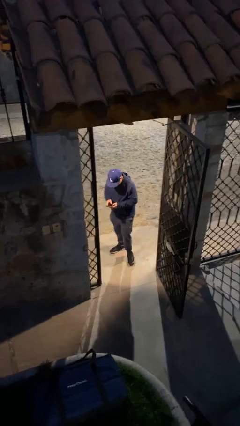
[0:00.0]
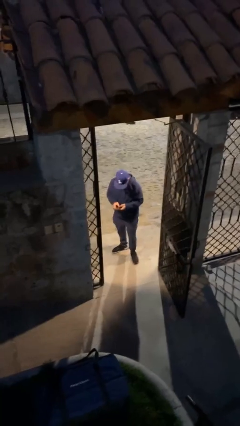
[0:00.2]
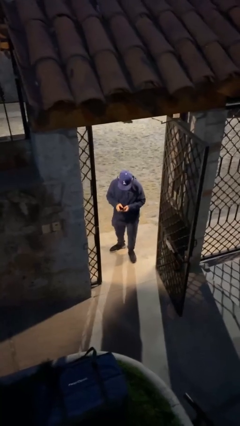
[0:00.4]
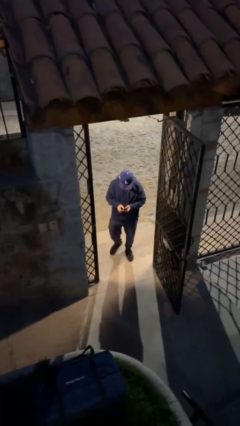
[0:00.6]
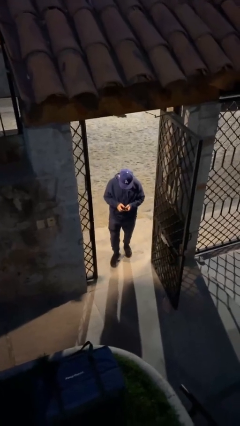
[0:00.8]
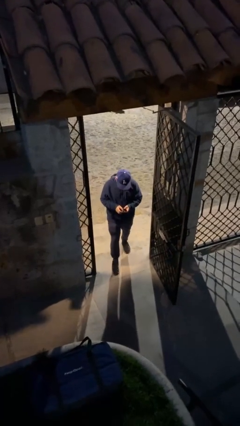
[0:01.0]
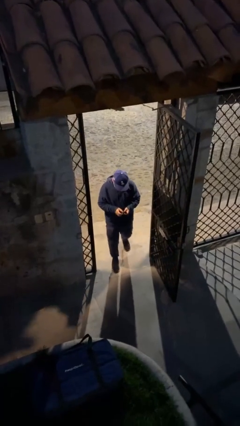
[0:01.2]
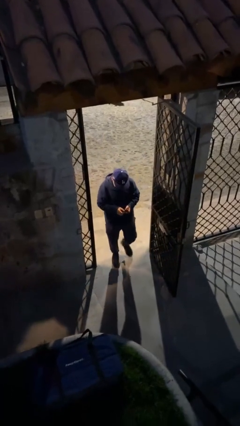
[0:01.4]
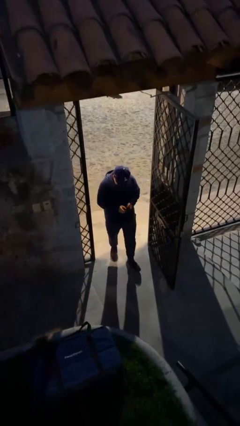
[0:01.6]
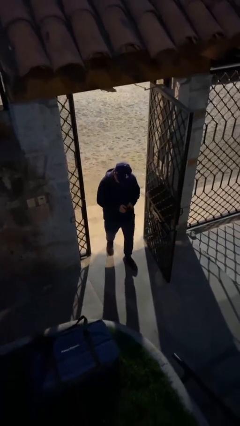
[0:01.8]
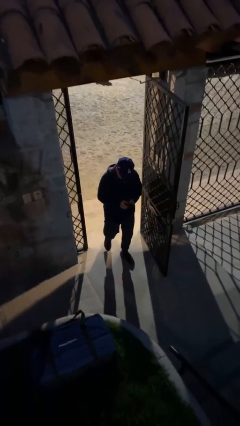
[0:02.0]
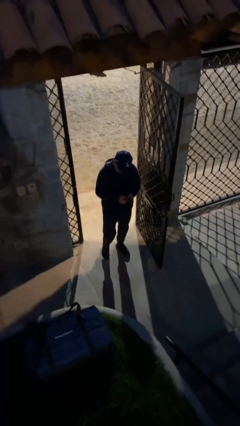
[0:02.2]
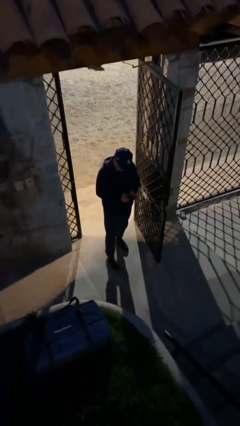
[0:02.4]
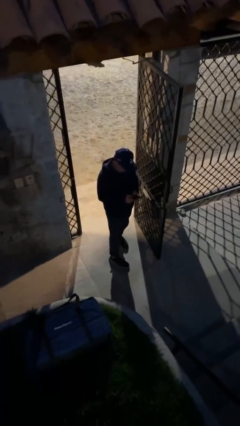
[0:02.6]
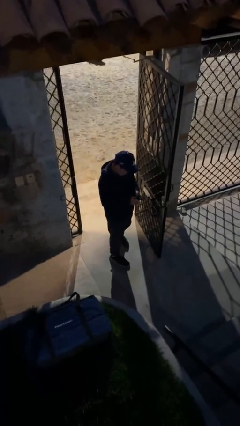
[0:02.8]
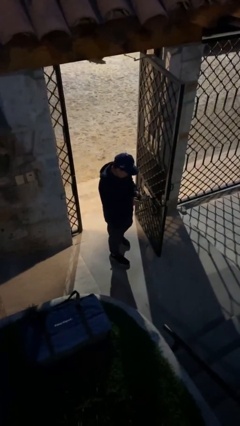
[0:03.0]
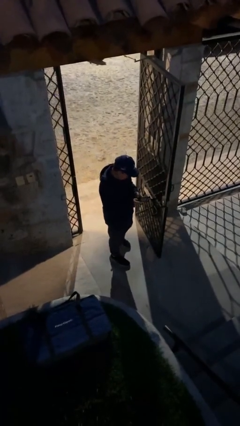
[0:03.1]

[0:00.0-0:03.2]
person enters scene through structure

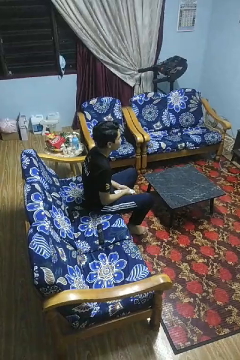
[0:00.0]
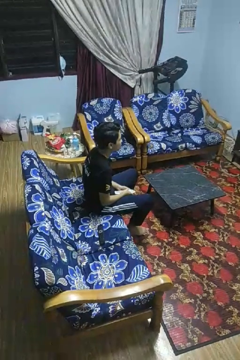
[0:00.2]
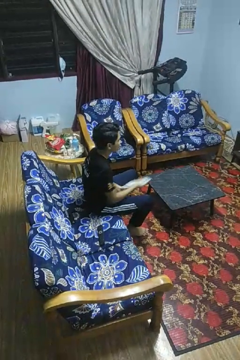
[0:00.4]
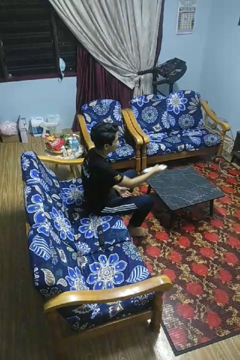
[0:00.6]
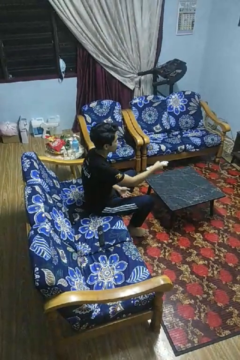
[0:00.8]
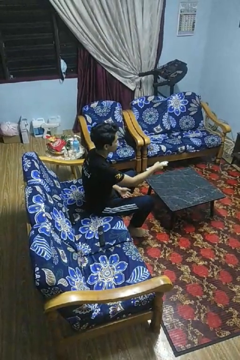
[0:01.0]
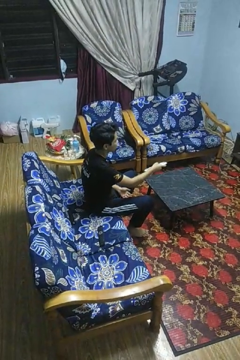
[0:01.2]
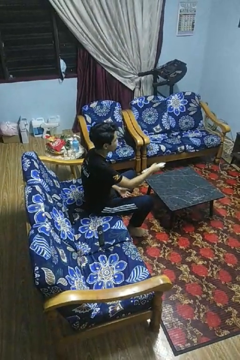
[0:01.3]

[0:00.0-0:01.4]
person uses television remote

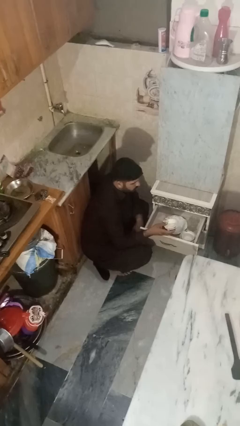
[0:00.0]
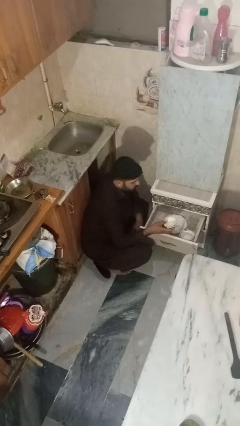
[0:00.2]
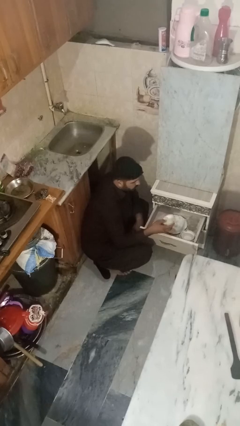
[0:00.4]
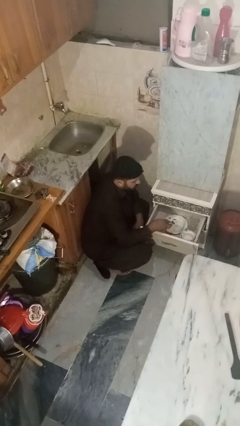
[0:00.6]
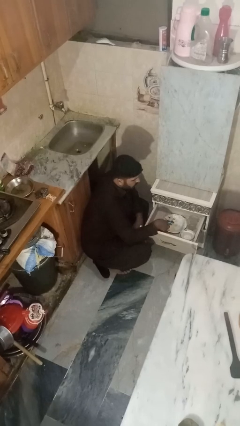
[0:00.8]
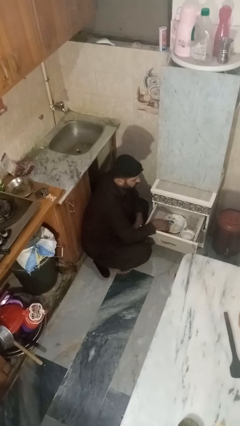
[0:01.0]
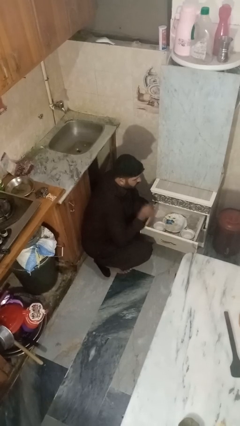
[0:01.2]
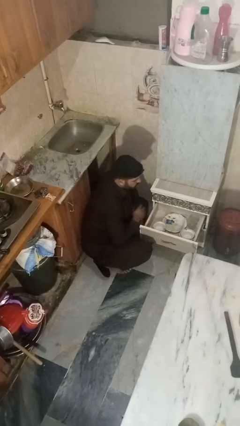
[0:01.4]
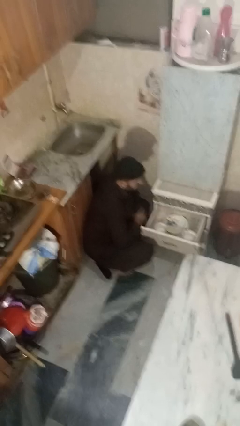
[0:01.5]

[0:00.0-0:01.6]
person puts object into kitchen drawer

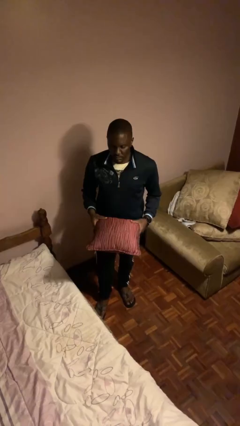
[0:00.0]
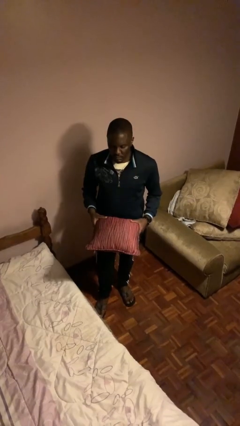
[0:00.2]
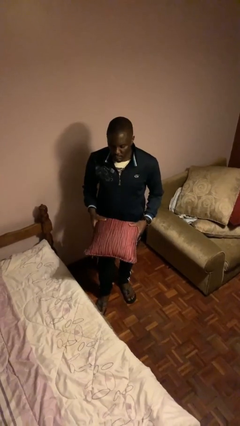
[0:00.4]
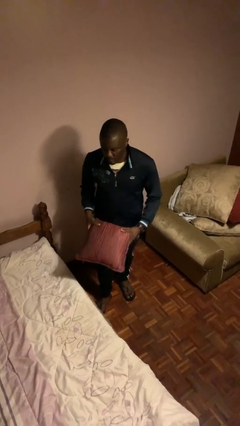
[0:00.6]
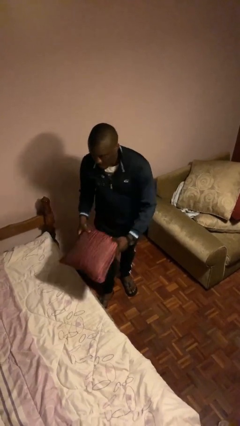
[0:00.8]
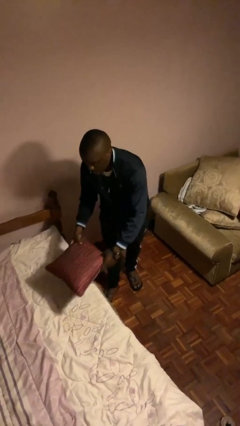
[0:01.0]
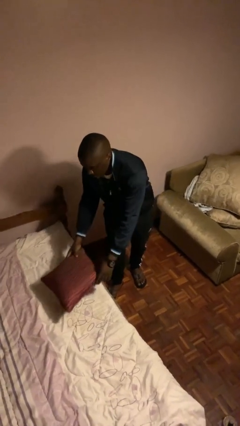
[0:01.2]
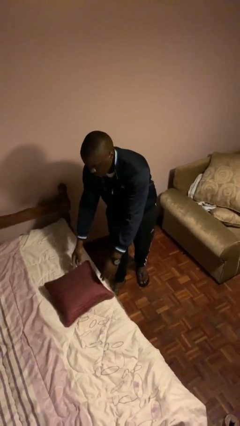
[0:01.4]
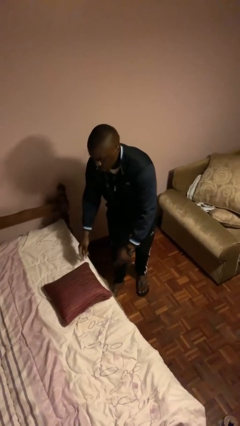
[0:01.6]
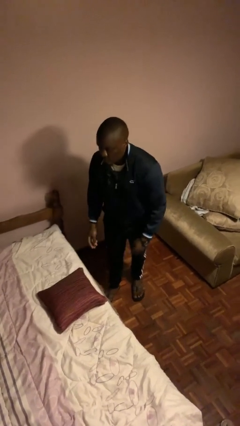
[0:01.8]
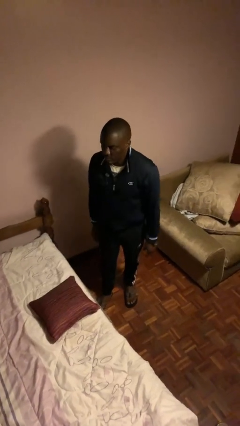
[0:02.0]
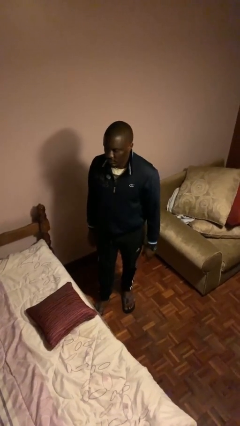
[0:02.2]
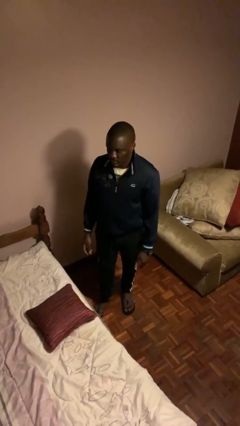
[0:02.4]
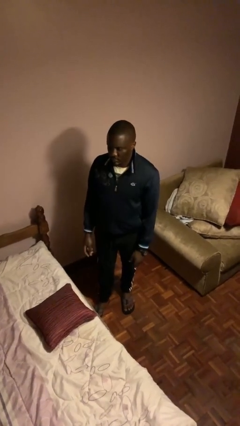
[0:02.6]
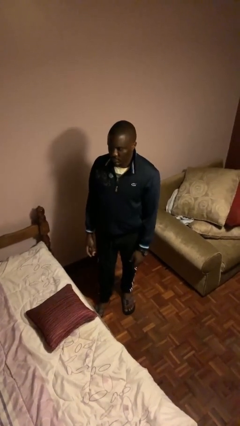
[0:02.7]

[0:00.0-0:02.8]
person puts down object on bed

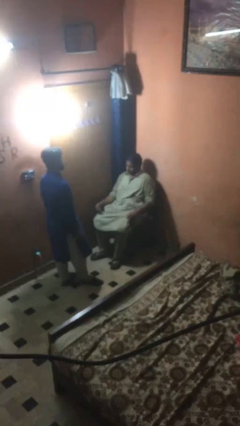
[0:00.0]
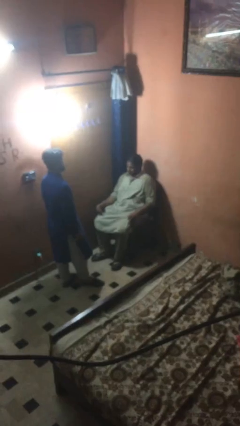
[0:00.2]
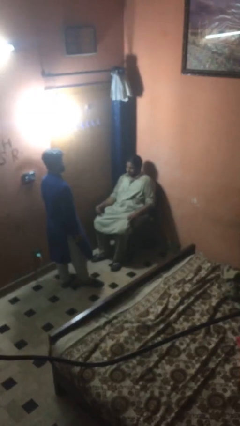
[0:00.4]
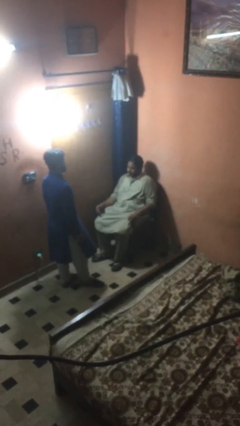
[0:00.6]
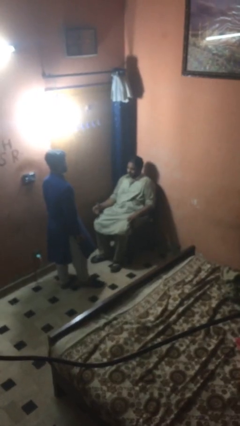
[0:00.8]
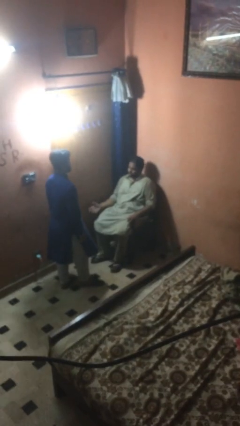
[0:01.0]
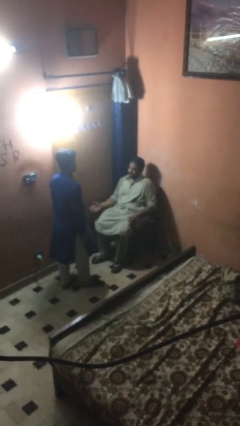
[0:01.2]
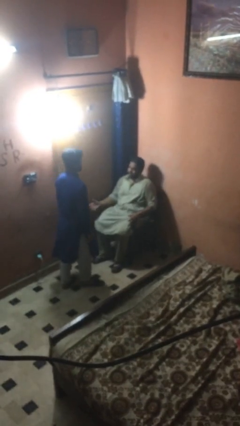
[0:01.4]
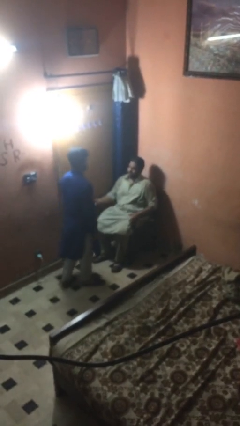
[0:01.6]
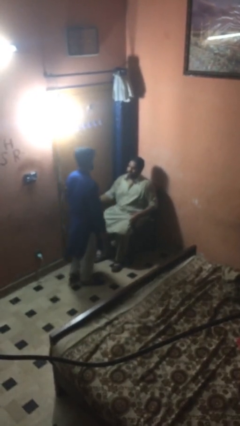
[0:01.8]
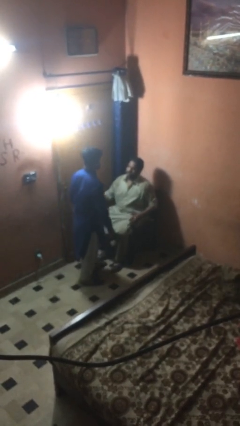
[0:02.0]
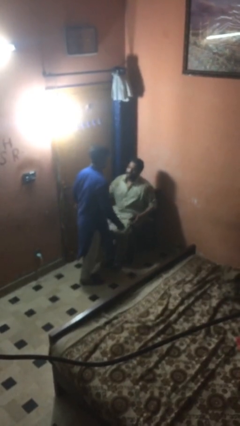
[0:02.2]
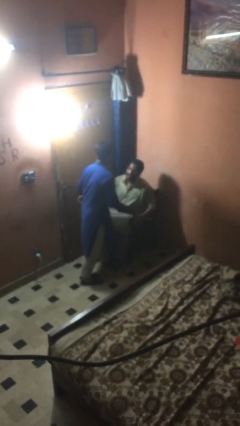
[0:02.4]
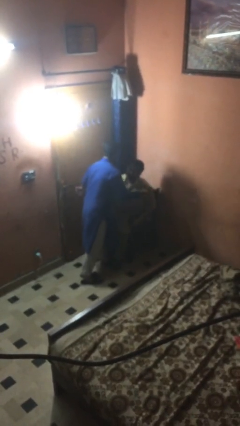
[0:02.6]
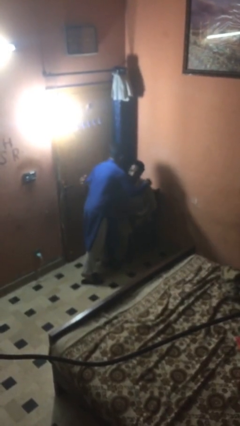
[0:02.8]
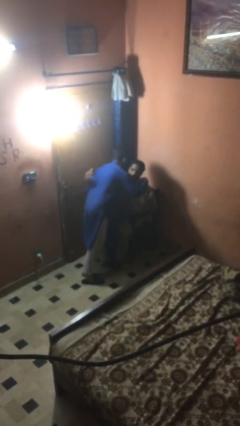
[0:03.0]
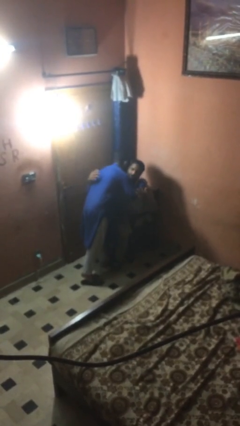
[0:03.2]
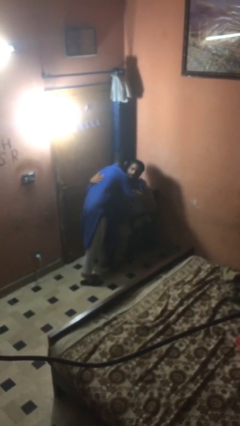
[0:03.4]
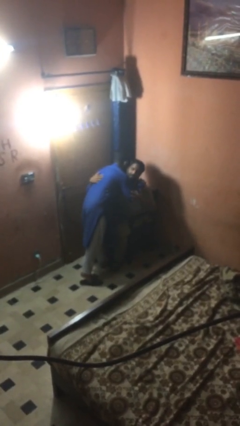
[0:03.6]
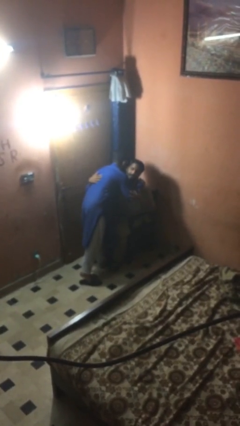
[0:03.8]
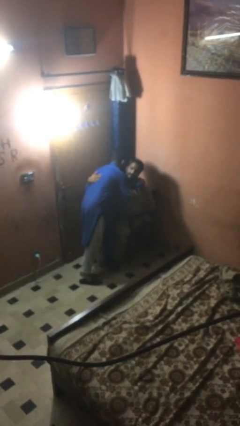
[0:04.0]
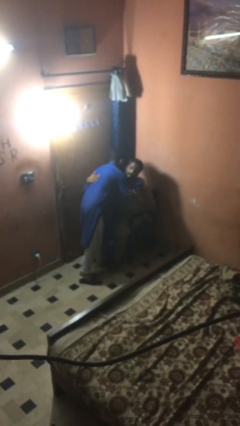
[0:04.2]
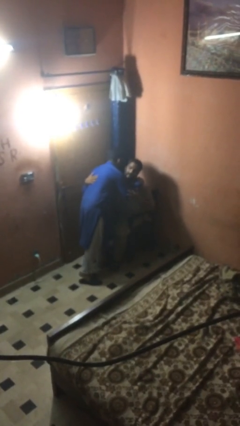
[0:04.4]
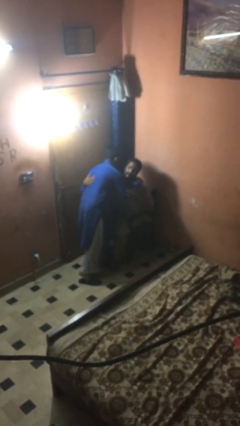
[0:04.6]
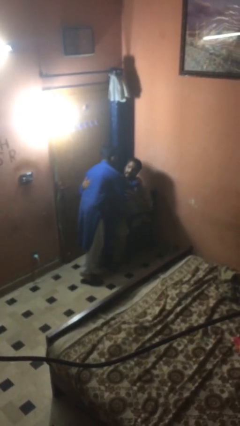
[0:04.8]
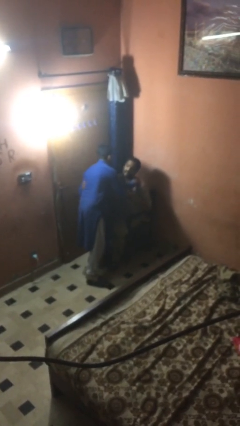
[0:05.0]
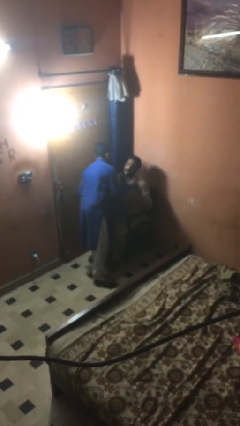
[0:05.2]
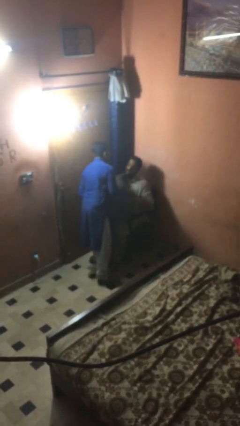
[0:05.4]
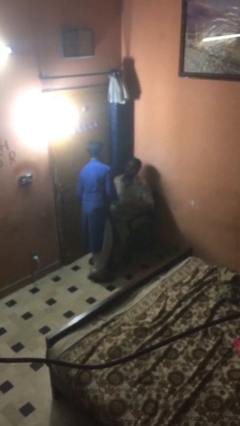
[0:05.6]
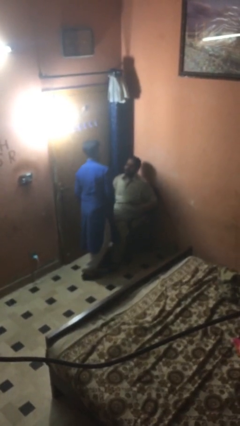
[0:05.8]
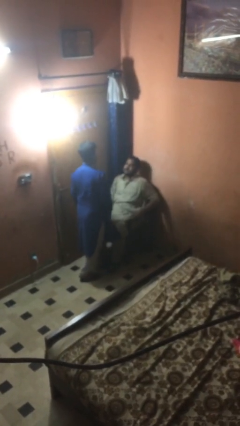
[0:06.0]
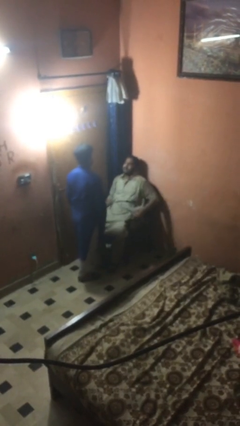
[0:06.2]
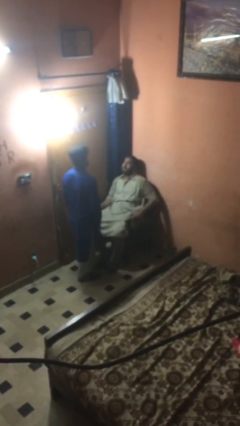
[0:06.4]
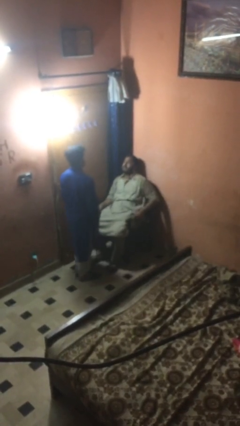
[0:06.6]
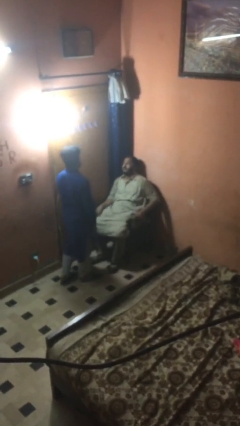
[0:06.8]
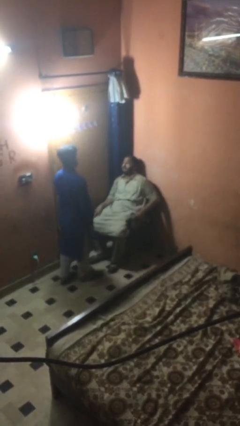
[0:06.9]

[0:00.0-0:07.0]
person embraces person

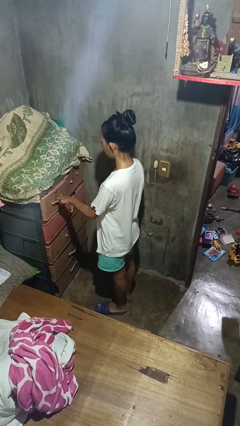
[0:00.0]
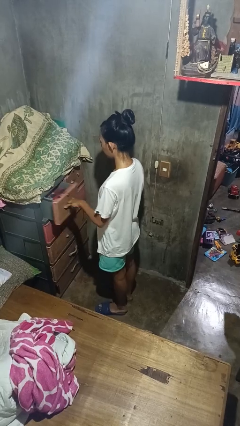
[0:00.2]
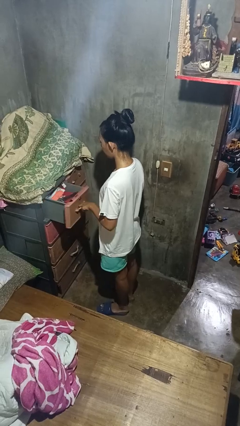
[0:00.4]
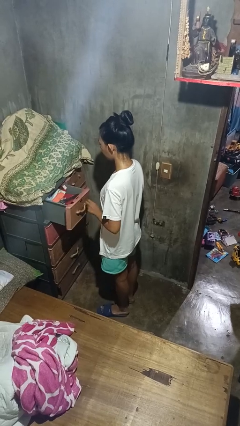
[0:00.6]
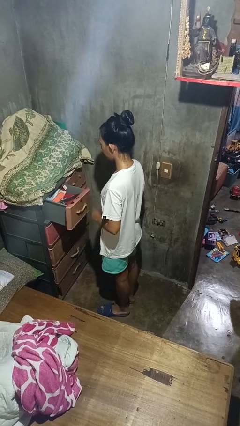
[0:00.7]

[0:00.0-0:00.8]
person opens dresser drawer

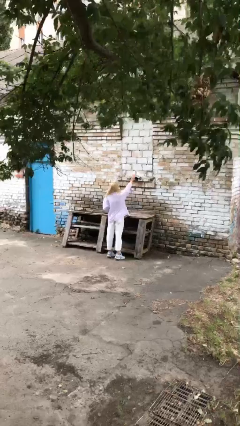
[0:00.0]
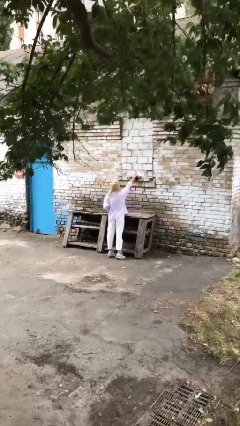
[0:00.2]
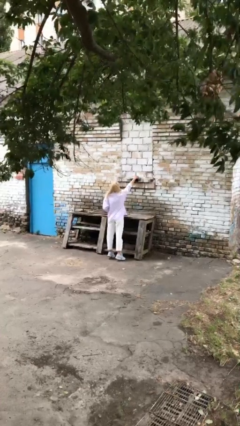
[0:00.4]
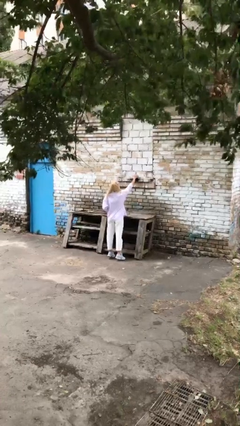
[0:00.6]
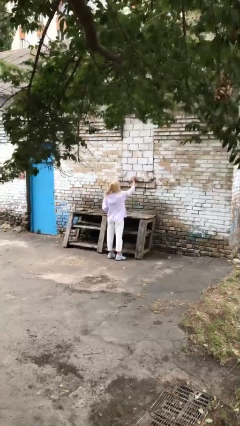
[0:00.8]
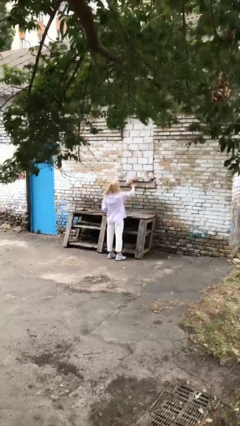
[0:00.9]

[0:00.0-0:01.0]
person picks up object from shelf
